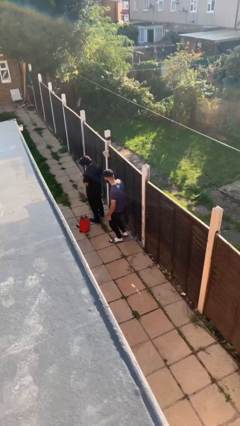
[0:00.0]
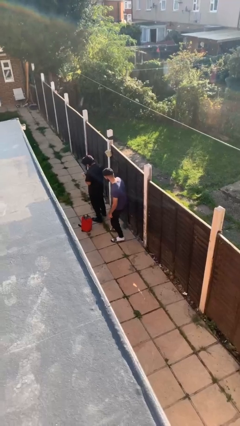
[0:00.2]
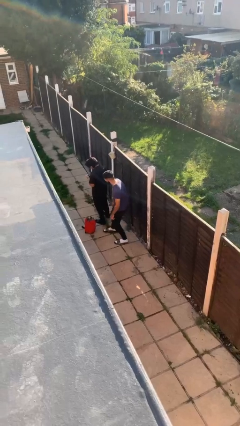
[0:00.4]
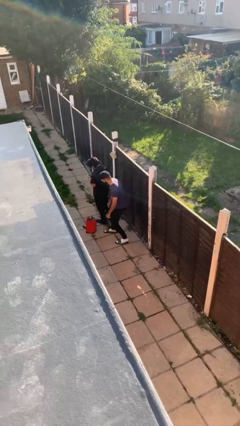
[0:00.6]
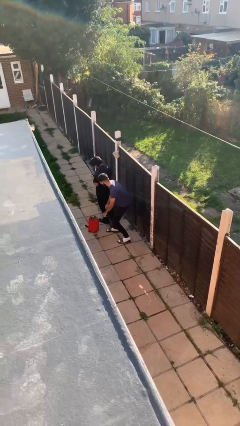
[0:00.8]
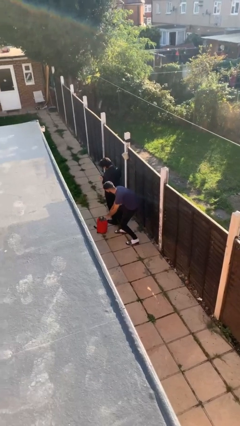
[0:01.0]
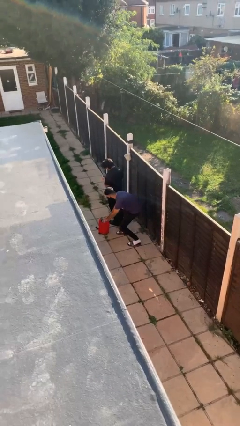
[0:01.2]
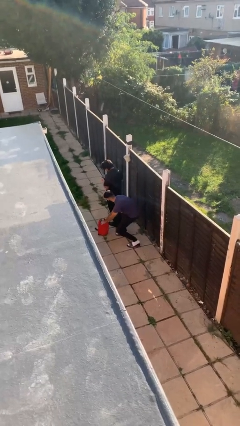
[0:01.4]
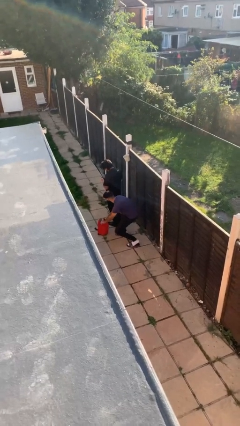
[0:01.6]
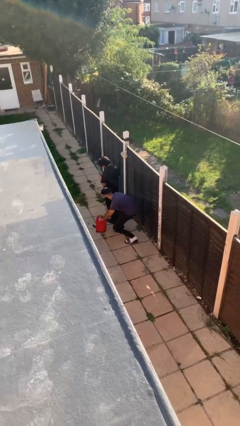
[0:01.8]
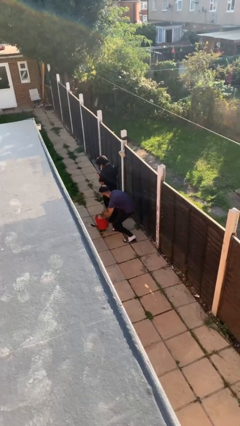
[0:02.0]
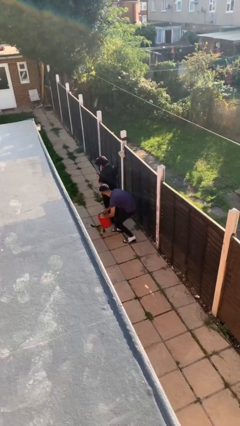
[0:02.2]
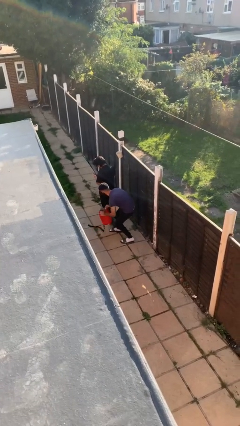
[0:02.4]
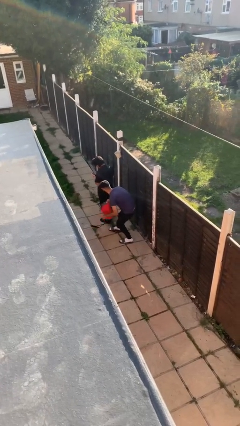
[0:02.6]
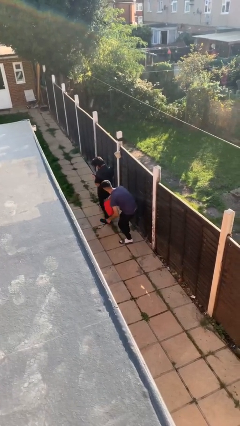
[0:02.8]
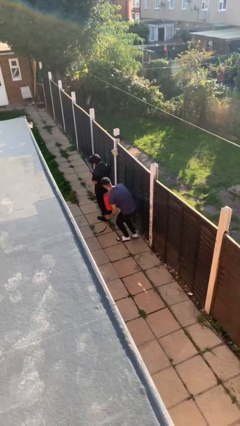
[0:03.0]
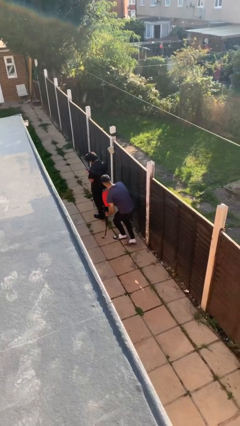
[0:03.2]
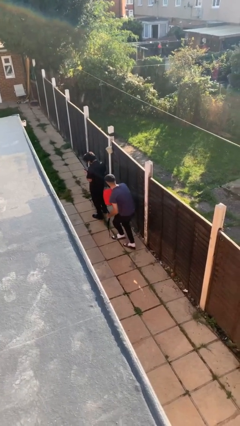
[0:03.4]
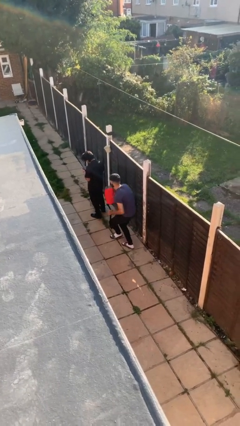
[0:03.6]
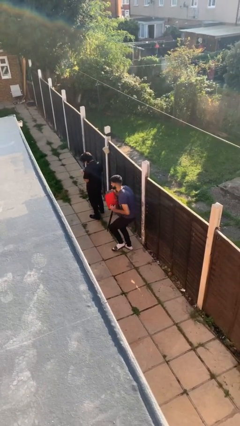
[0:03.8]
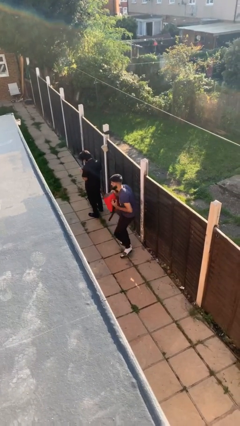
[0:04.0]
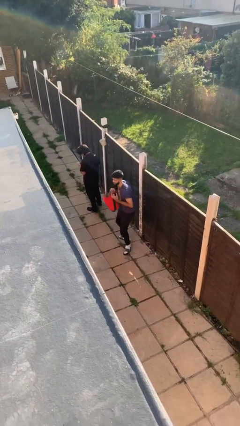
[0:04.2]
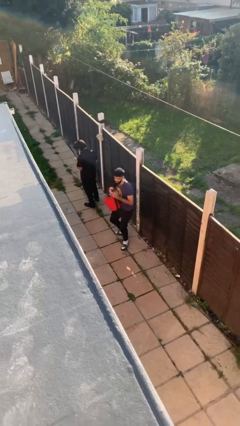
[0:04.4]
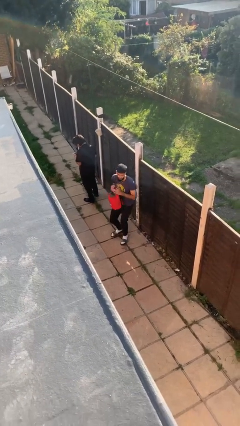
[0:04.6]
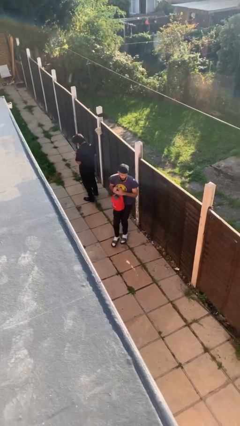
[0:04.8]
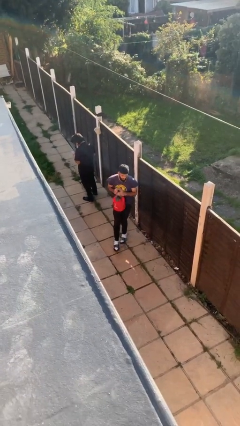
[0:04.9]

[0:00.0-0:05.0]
person steals object from person

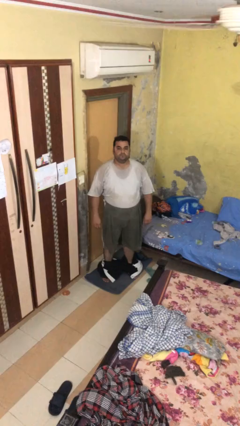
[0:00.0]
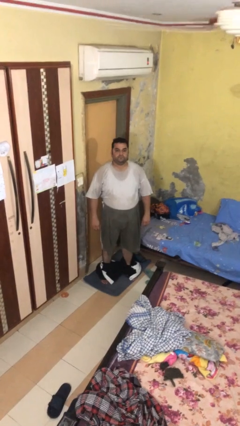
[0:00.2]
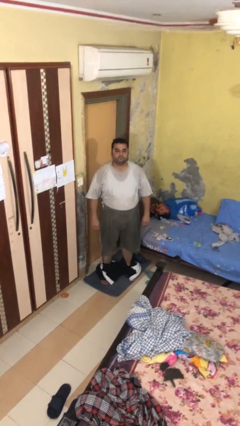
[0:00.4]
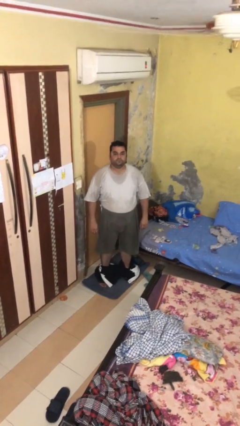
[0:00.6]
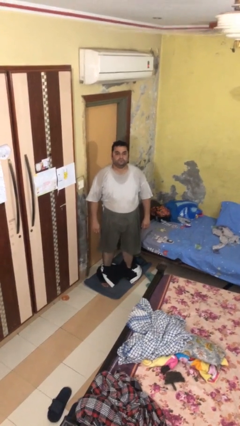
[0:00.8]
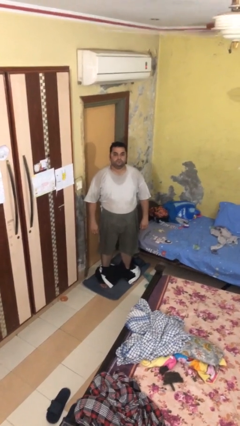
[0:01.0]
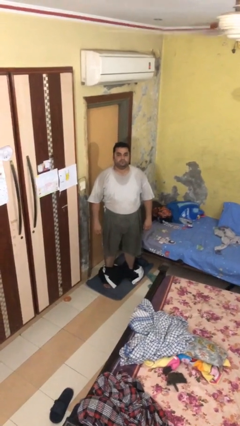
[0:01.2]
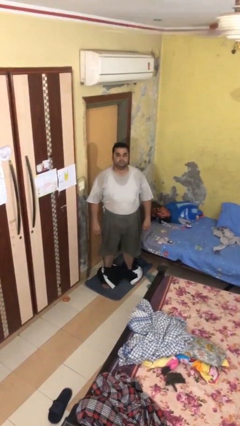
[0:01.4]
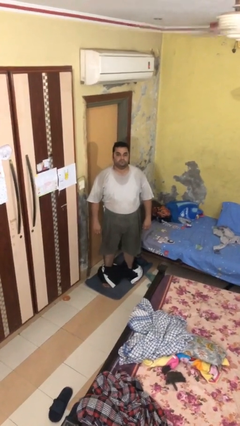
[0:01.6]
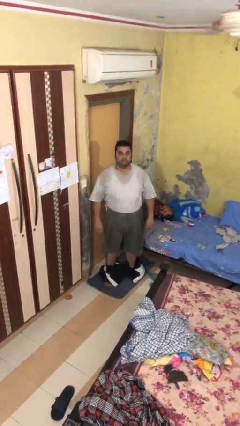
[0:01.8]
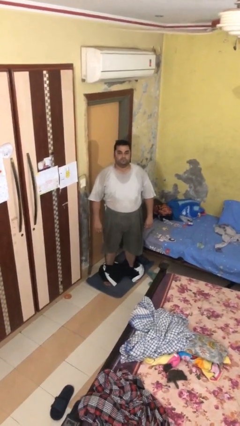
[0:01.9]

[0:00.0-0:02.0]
person takes off pants

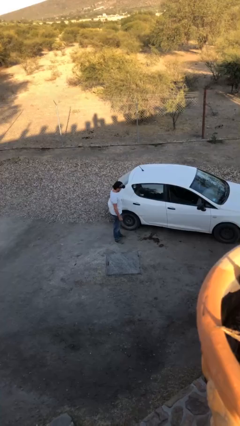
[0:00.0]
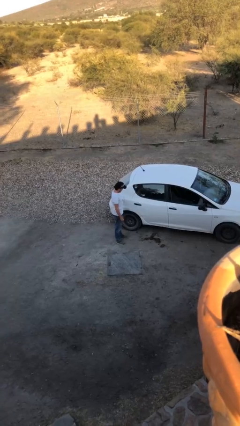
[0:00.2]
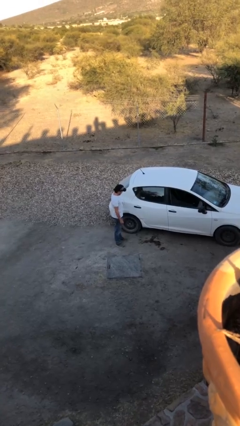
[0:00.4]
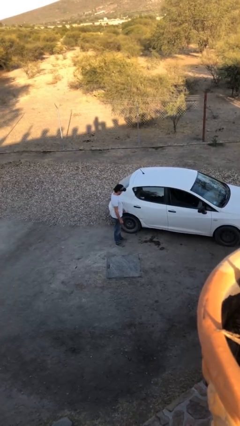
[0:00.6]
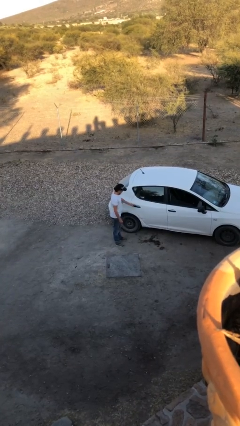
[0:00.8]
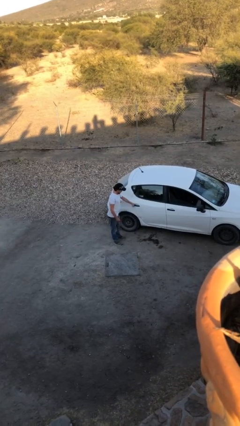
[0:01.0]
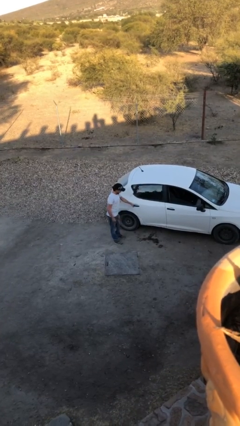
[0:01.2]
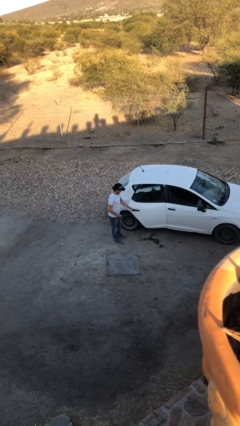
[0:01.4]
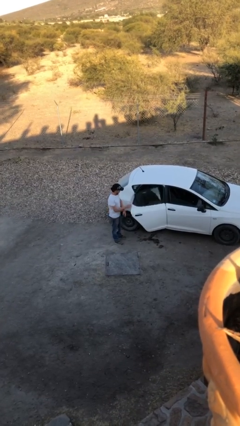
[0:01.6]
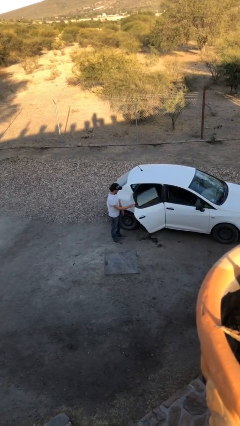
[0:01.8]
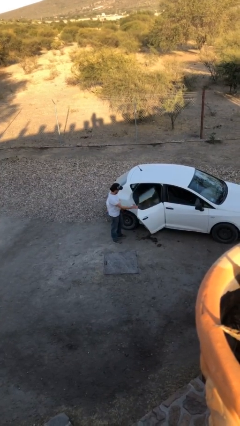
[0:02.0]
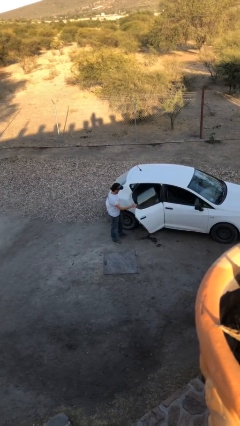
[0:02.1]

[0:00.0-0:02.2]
person opens car door

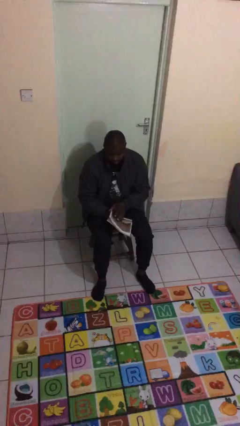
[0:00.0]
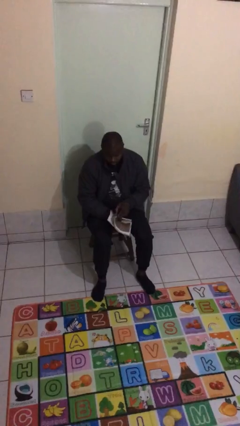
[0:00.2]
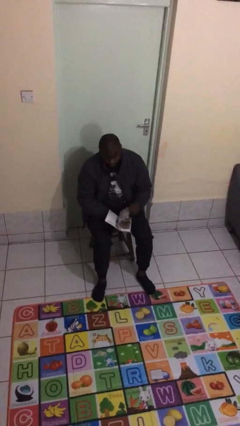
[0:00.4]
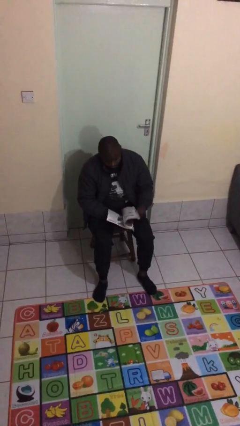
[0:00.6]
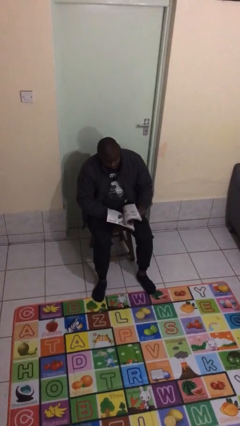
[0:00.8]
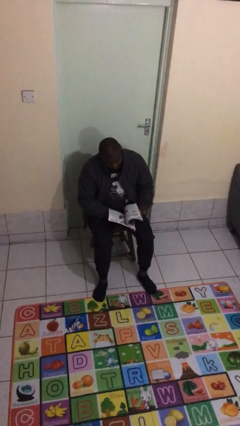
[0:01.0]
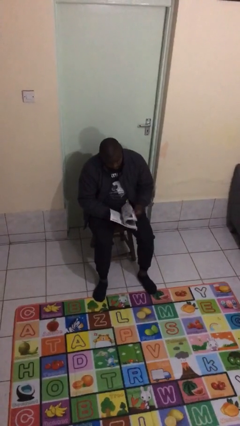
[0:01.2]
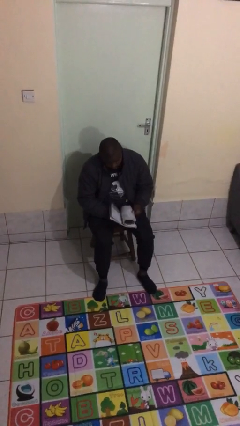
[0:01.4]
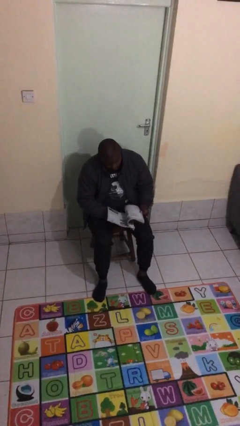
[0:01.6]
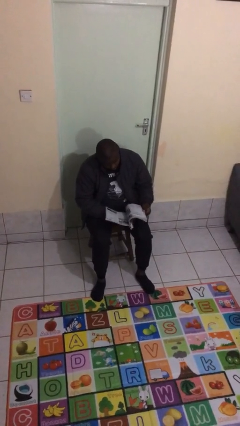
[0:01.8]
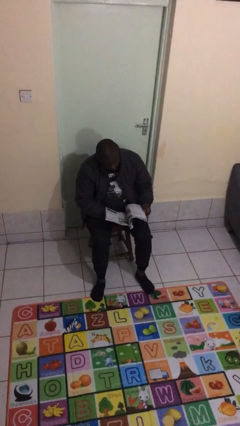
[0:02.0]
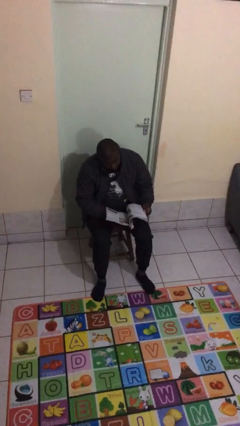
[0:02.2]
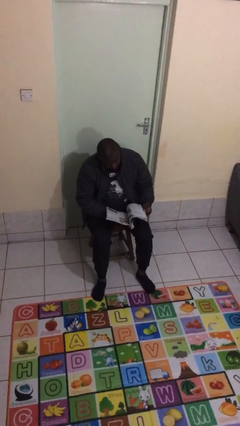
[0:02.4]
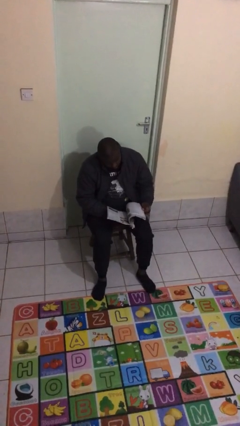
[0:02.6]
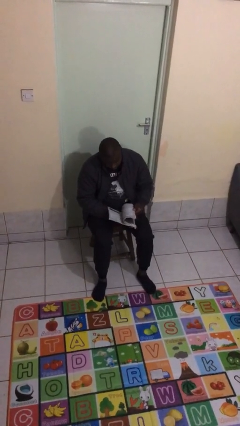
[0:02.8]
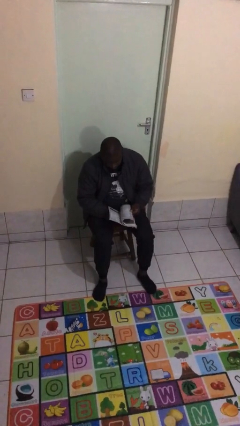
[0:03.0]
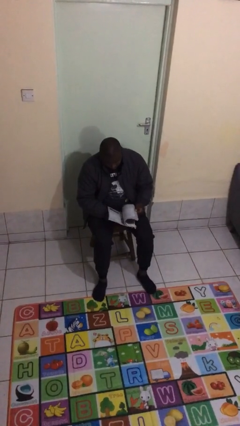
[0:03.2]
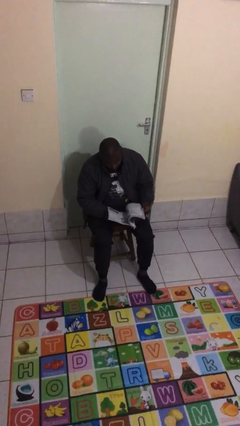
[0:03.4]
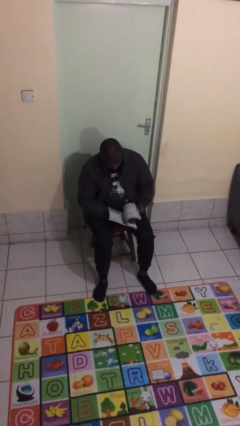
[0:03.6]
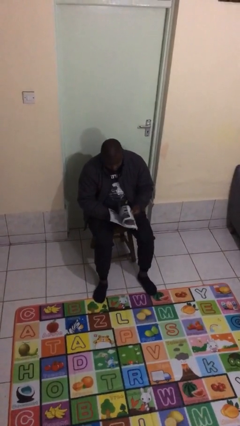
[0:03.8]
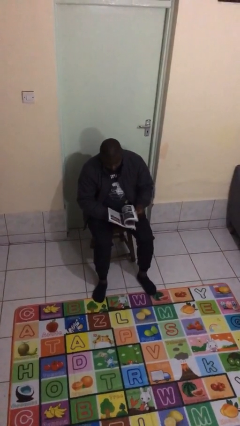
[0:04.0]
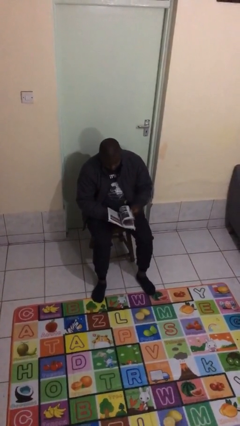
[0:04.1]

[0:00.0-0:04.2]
person reads magazine

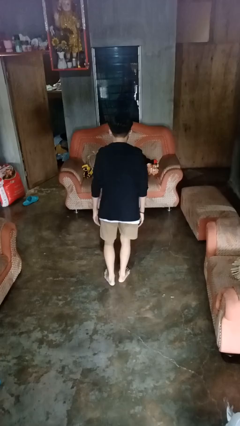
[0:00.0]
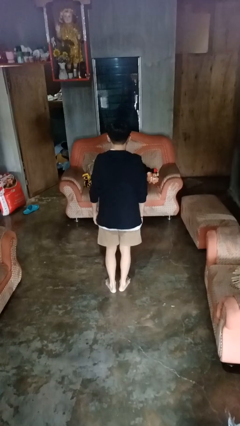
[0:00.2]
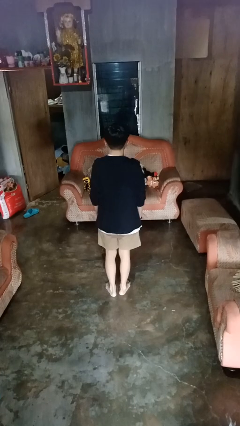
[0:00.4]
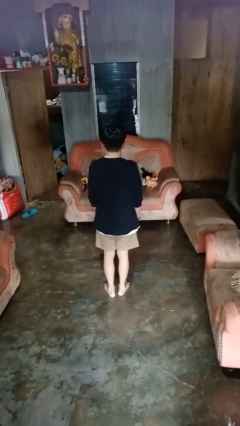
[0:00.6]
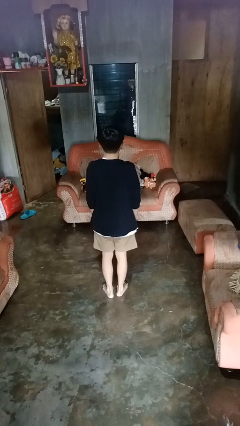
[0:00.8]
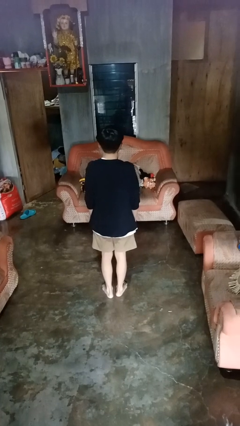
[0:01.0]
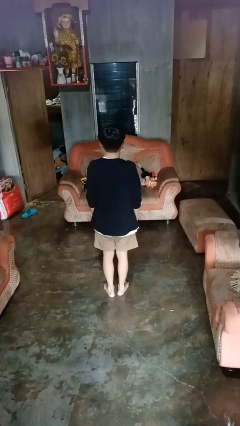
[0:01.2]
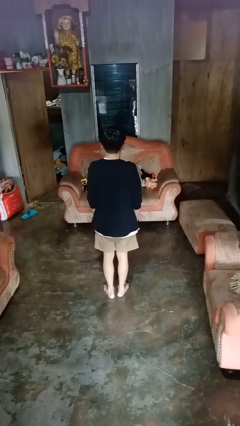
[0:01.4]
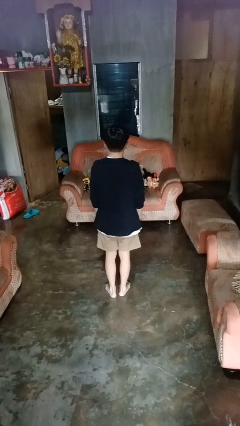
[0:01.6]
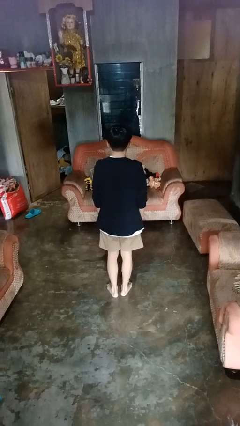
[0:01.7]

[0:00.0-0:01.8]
person stands up from floor

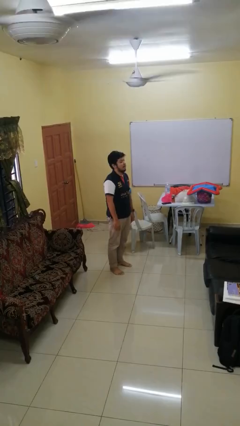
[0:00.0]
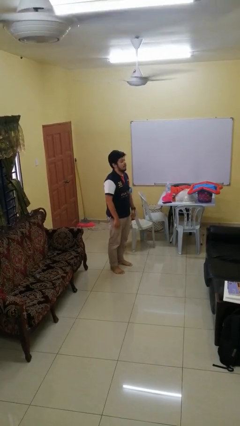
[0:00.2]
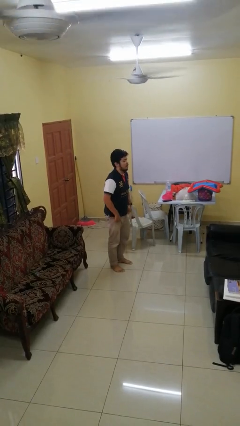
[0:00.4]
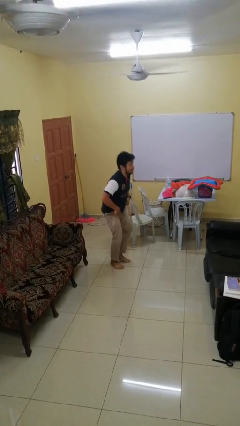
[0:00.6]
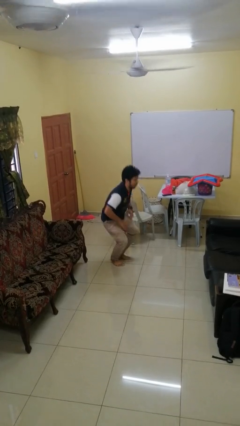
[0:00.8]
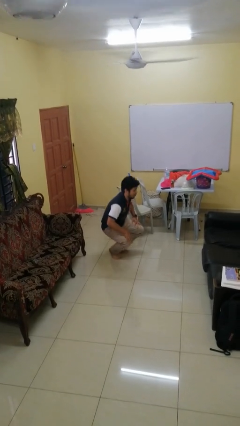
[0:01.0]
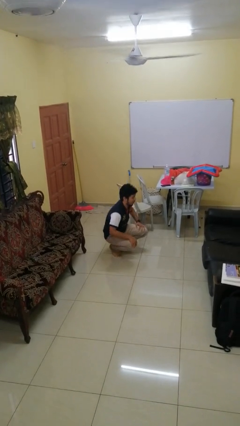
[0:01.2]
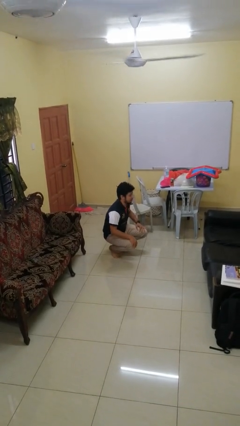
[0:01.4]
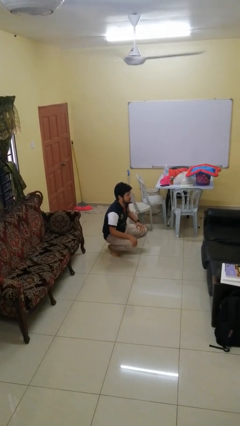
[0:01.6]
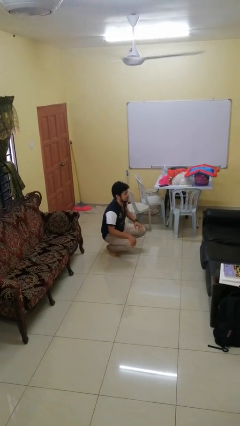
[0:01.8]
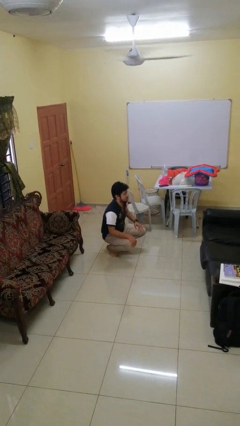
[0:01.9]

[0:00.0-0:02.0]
person squats

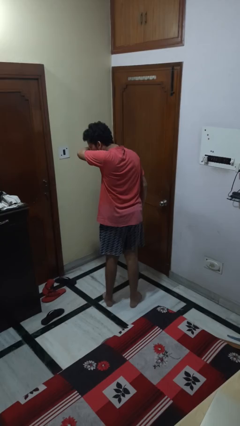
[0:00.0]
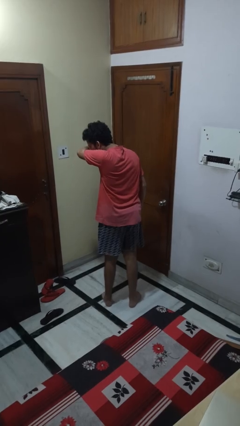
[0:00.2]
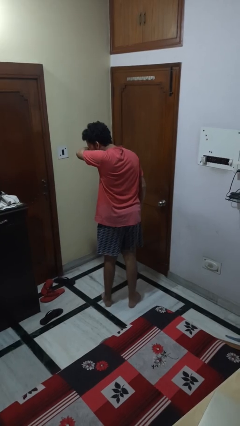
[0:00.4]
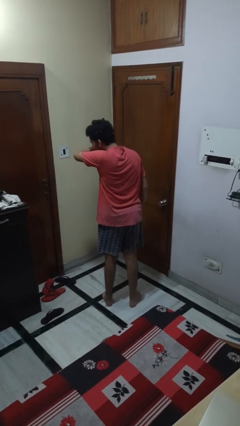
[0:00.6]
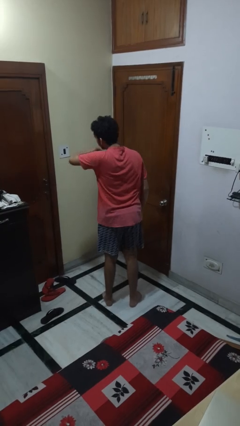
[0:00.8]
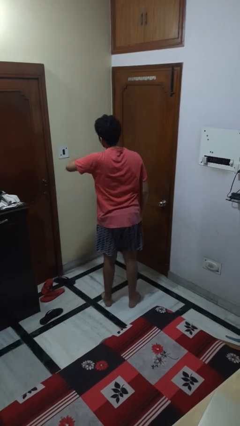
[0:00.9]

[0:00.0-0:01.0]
person sneezes into arm
